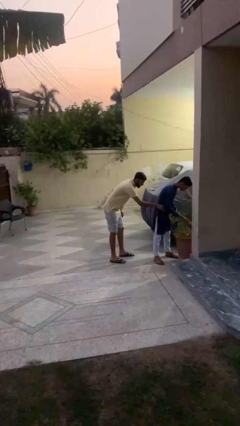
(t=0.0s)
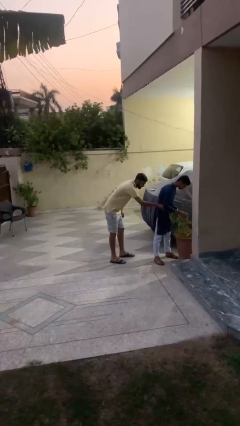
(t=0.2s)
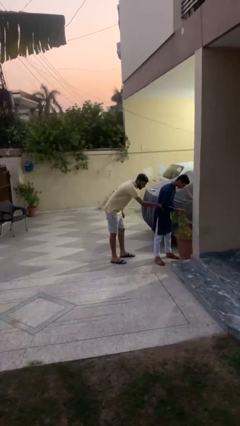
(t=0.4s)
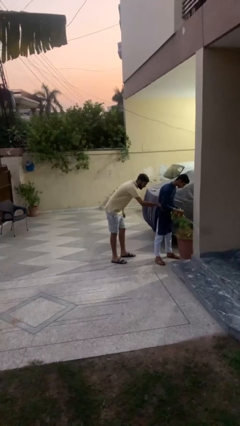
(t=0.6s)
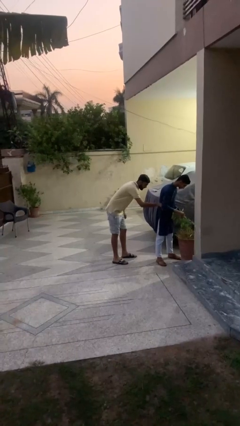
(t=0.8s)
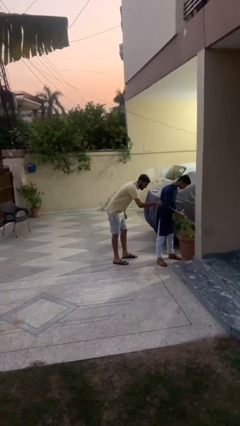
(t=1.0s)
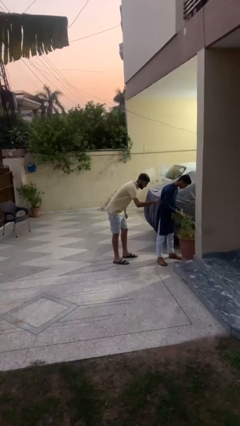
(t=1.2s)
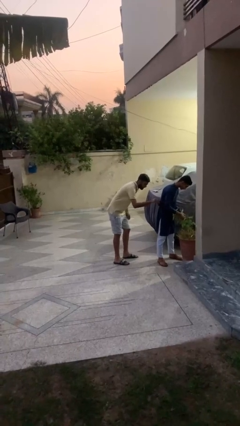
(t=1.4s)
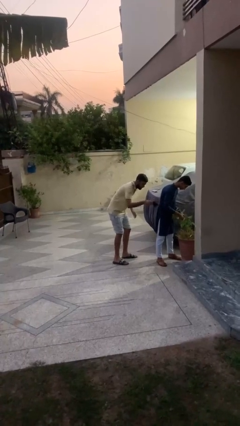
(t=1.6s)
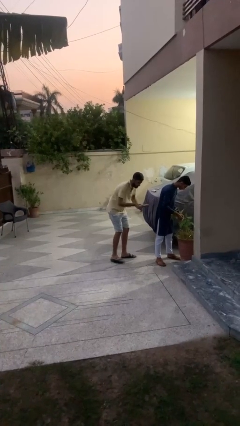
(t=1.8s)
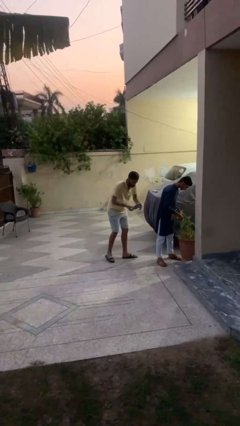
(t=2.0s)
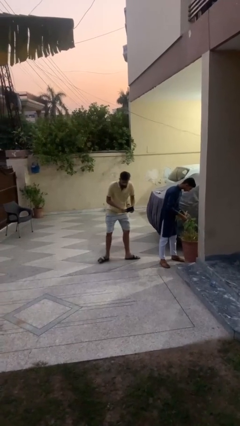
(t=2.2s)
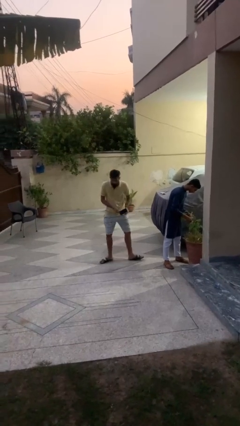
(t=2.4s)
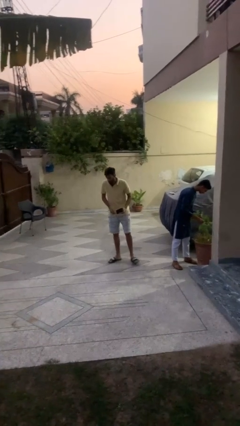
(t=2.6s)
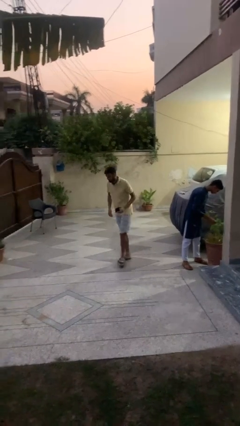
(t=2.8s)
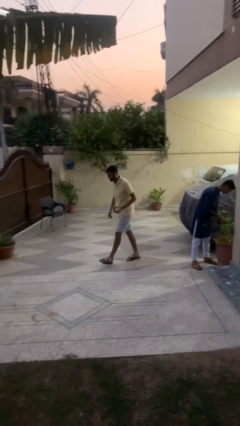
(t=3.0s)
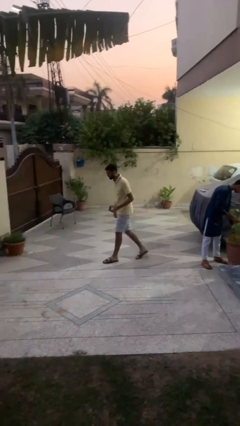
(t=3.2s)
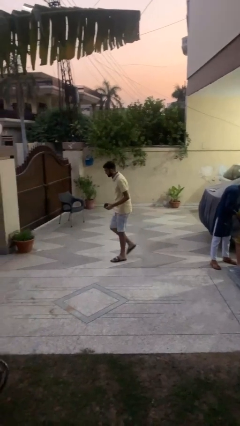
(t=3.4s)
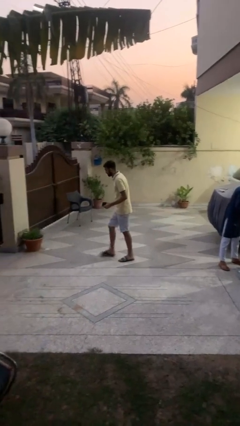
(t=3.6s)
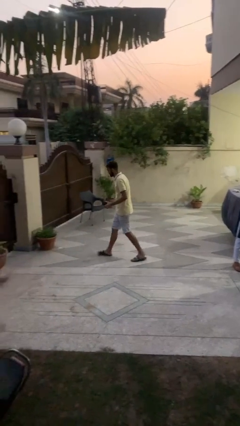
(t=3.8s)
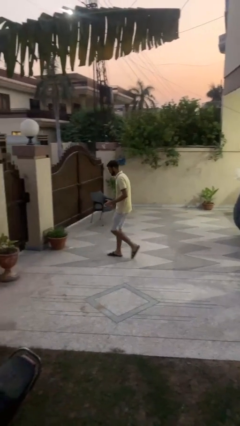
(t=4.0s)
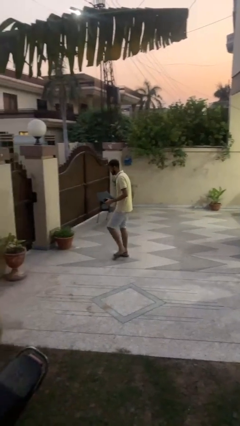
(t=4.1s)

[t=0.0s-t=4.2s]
person steals object from person

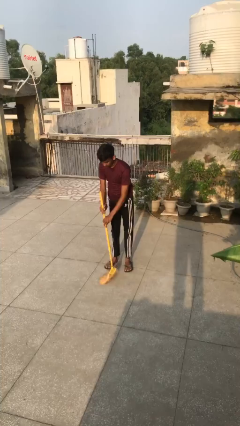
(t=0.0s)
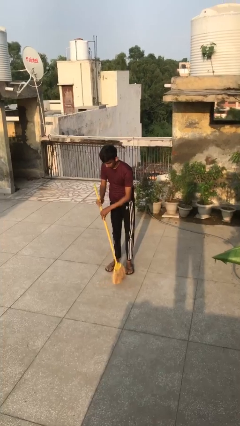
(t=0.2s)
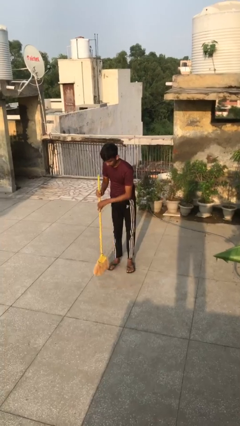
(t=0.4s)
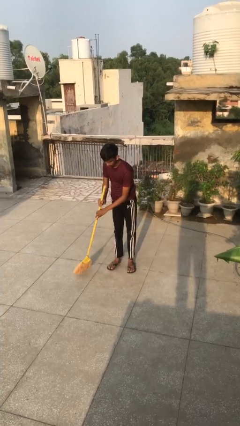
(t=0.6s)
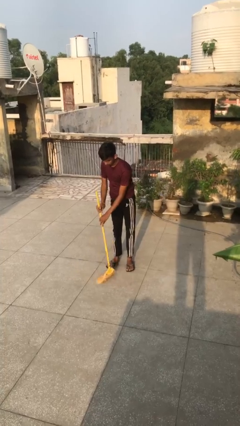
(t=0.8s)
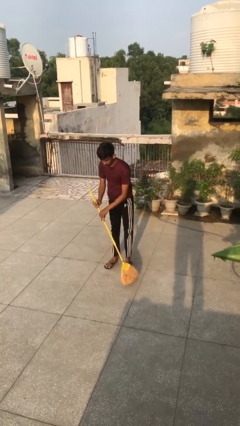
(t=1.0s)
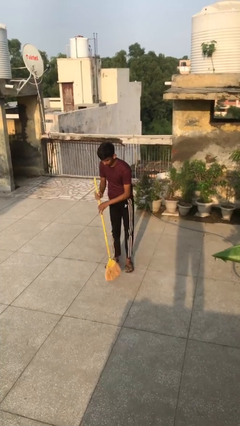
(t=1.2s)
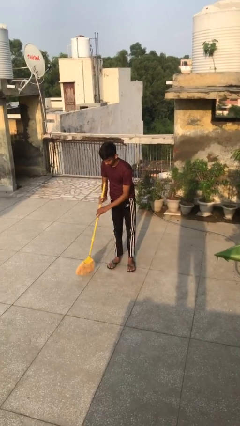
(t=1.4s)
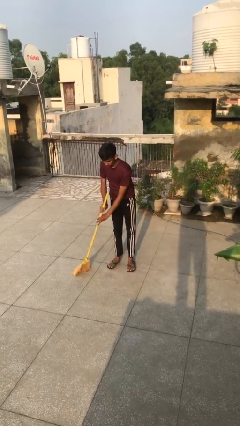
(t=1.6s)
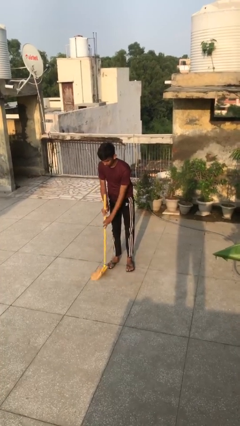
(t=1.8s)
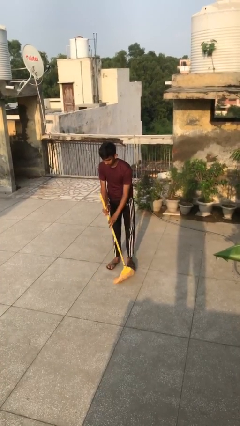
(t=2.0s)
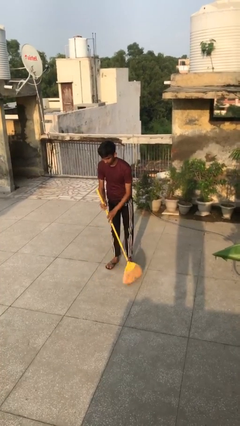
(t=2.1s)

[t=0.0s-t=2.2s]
person sweeps floor

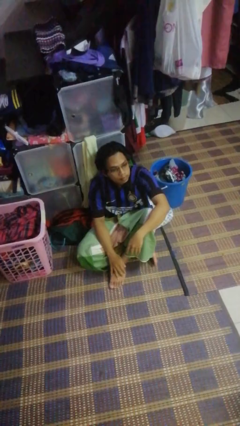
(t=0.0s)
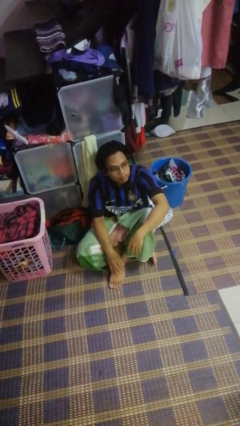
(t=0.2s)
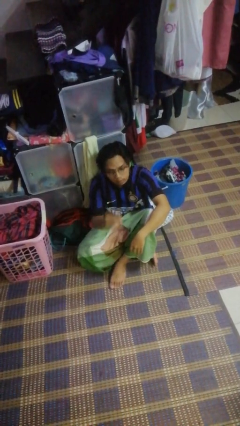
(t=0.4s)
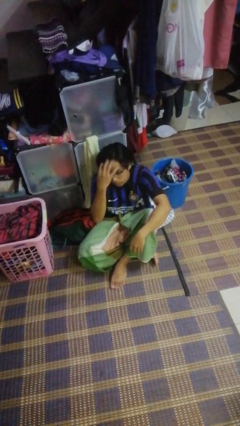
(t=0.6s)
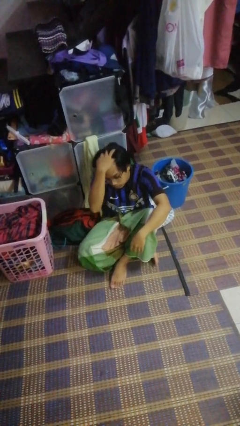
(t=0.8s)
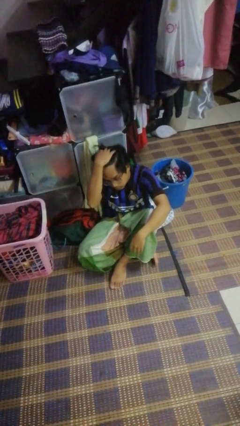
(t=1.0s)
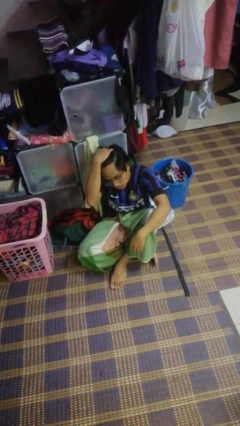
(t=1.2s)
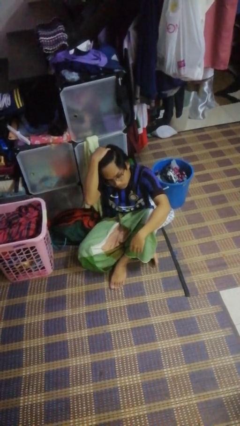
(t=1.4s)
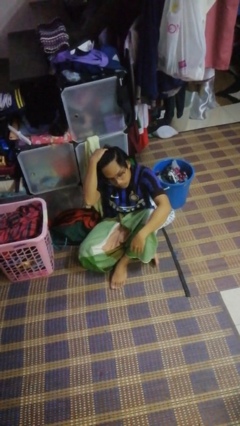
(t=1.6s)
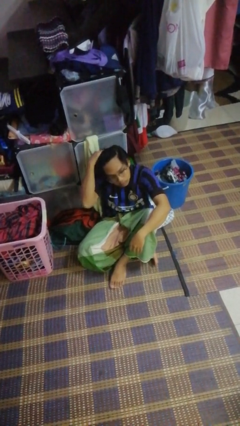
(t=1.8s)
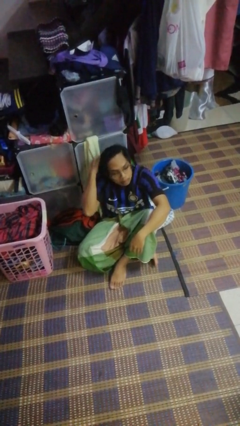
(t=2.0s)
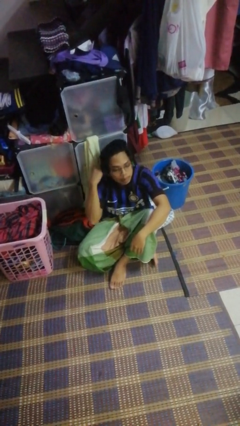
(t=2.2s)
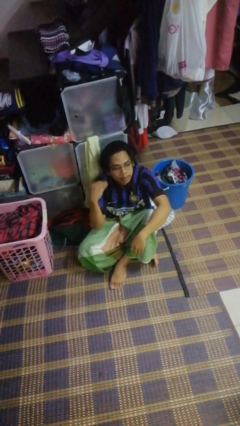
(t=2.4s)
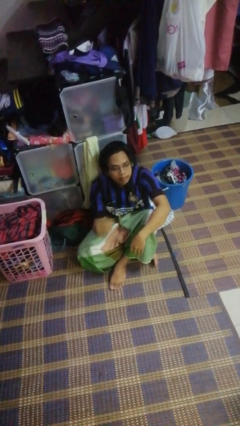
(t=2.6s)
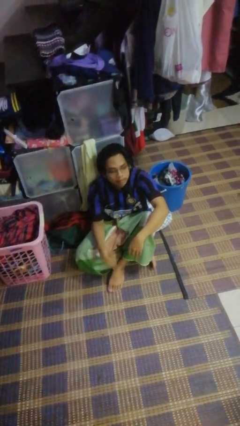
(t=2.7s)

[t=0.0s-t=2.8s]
person strokes hair

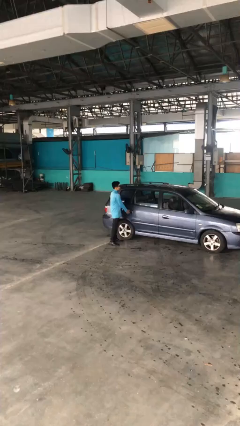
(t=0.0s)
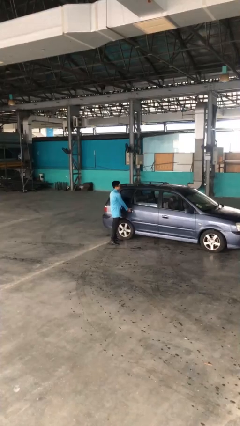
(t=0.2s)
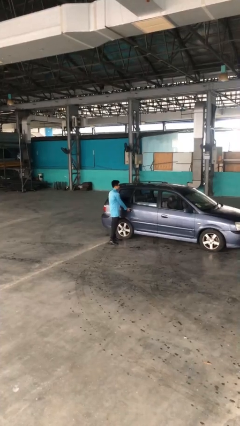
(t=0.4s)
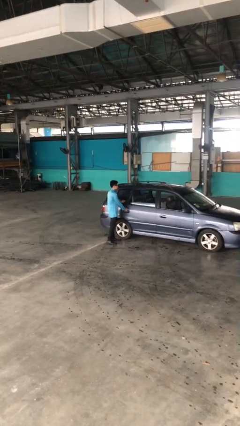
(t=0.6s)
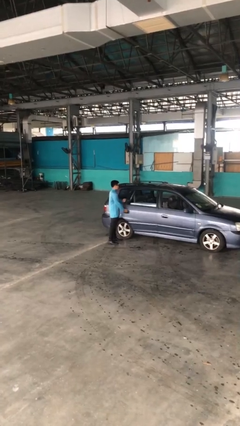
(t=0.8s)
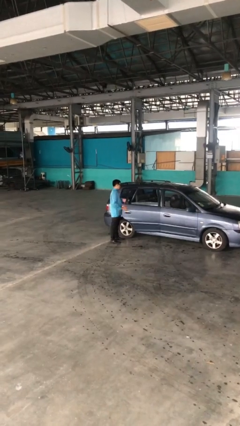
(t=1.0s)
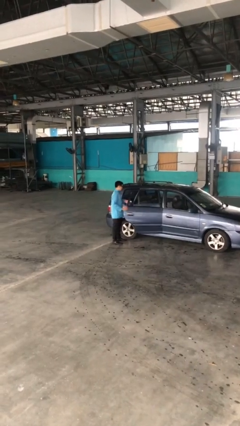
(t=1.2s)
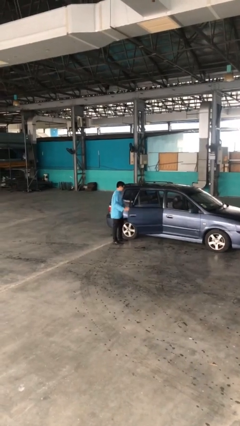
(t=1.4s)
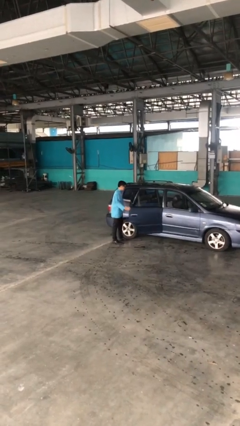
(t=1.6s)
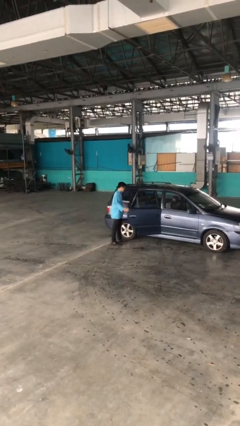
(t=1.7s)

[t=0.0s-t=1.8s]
person opens car door

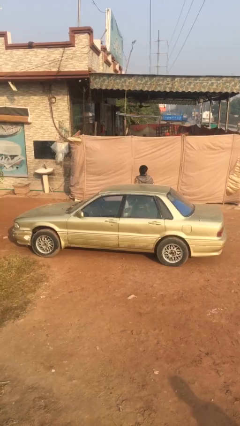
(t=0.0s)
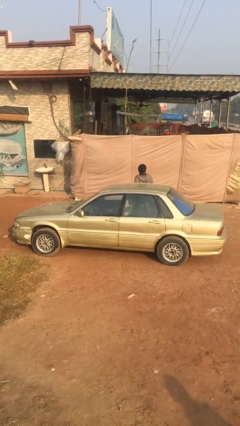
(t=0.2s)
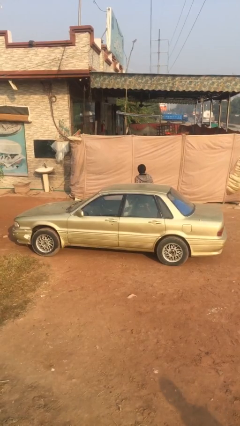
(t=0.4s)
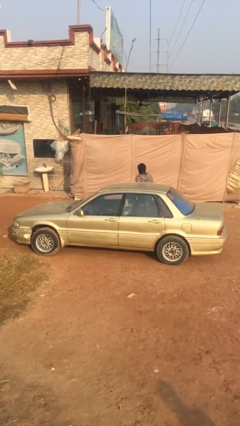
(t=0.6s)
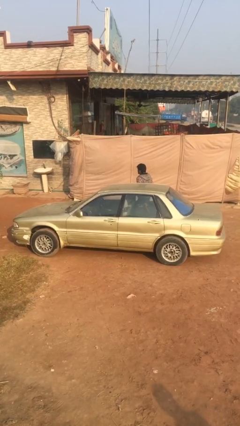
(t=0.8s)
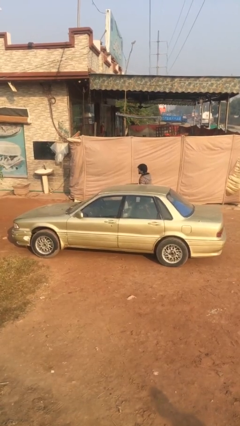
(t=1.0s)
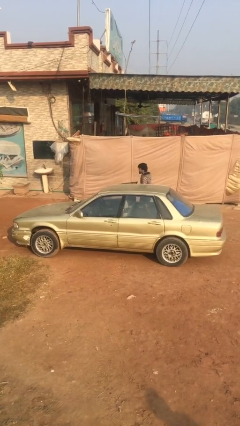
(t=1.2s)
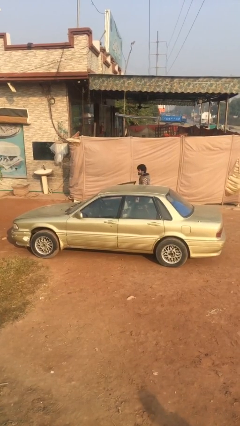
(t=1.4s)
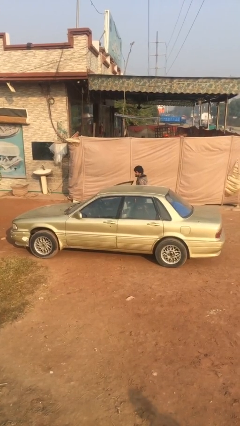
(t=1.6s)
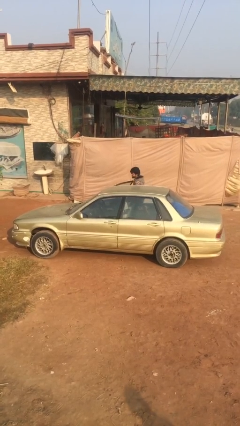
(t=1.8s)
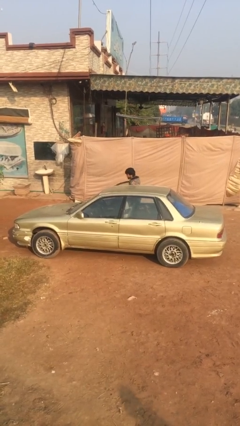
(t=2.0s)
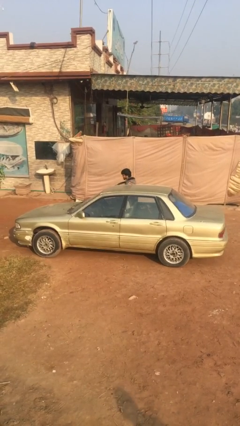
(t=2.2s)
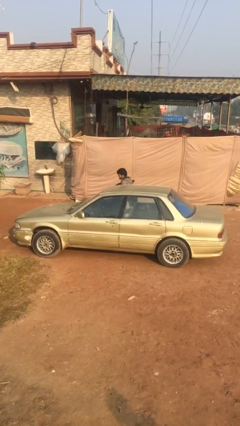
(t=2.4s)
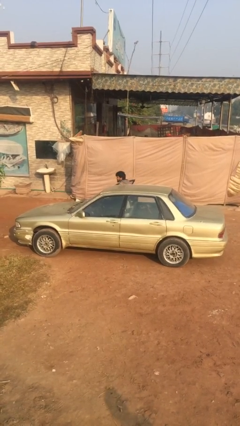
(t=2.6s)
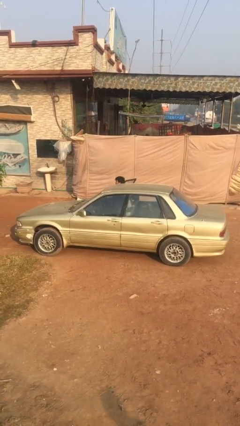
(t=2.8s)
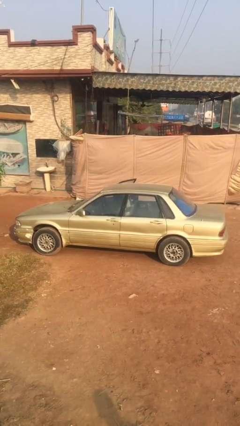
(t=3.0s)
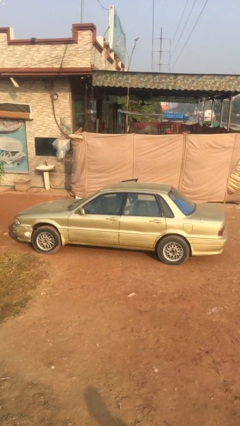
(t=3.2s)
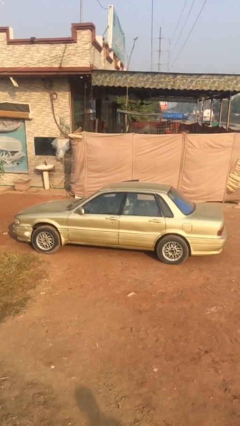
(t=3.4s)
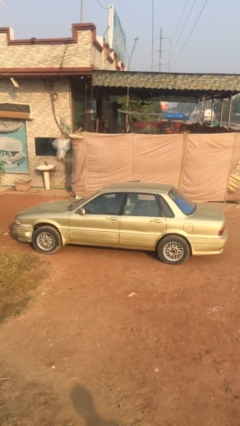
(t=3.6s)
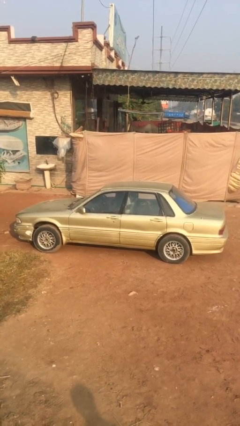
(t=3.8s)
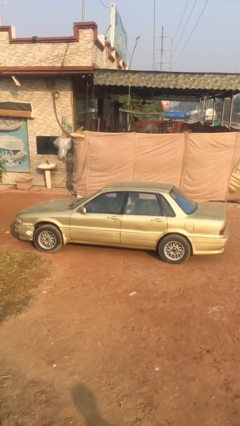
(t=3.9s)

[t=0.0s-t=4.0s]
car picks up person

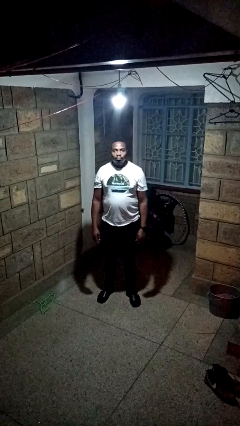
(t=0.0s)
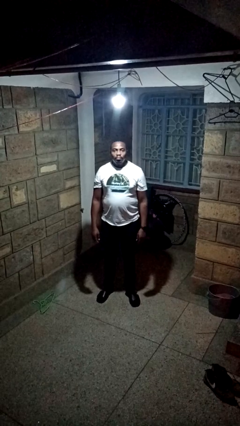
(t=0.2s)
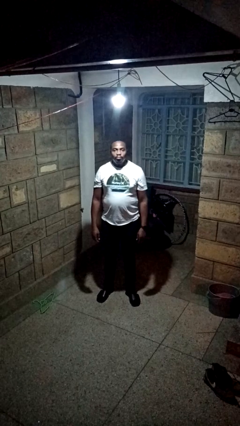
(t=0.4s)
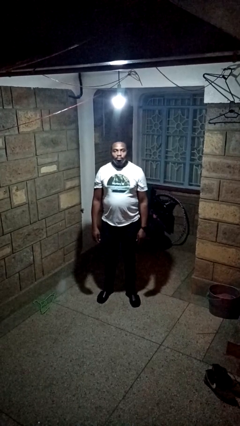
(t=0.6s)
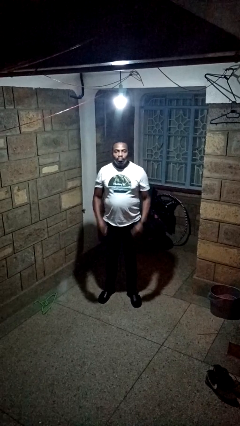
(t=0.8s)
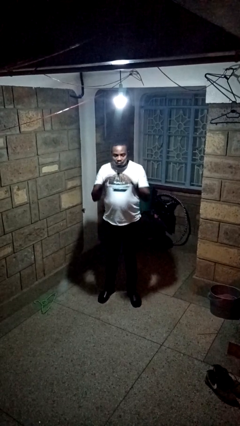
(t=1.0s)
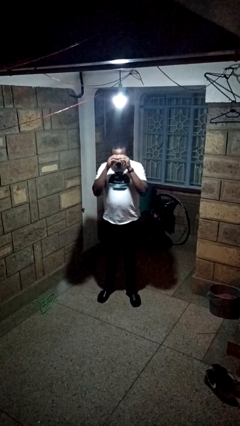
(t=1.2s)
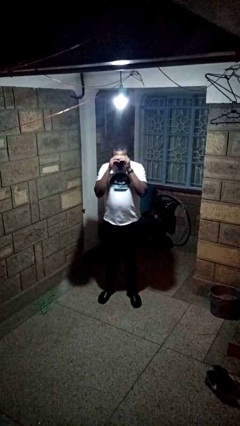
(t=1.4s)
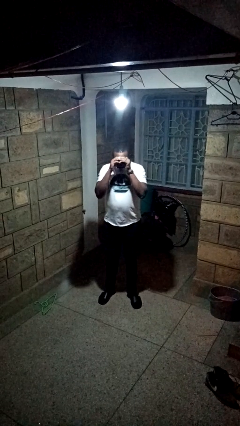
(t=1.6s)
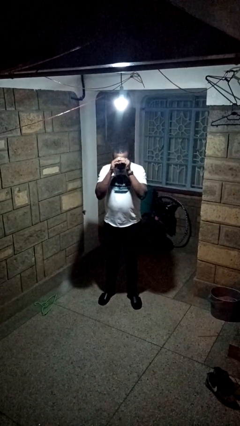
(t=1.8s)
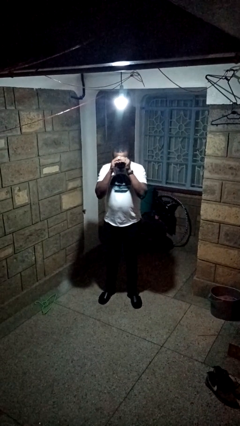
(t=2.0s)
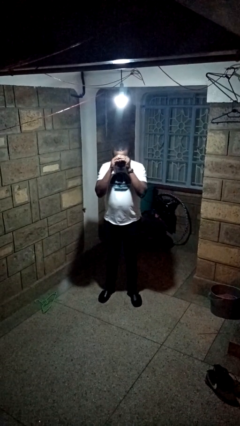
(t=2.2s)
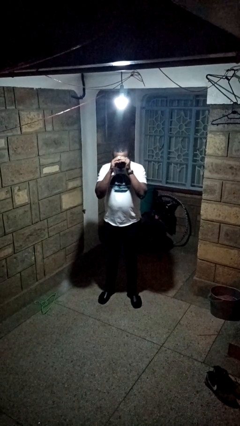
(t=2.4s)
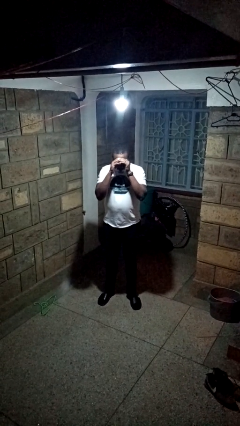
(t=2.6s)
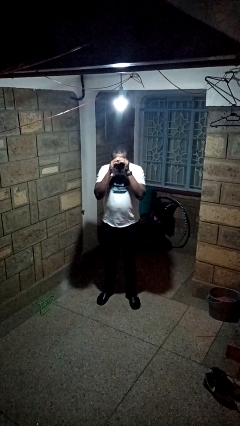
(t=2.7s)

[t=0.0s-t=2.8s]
person shades eyes
